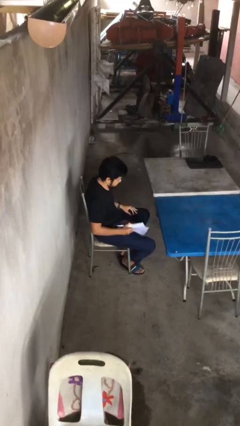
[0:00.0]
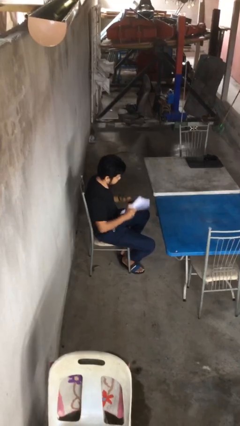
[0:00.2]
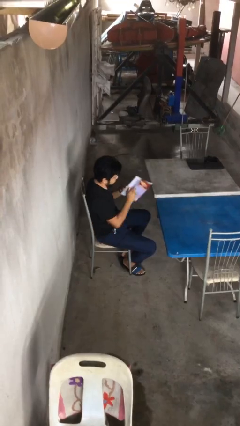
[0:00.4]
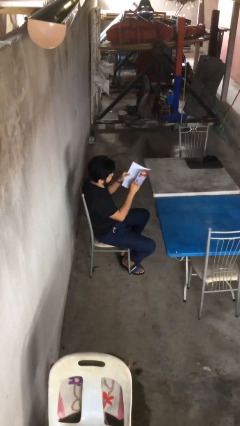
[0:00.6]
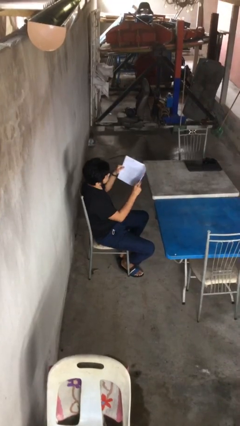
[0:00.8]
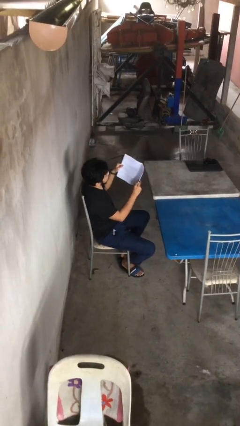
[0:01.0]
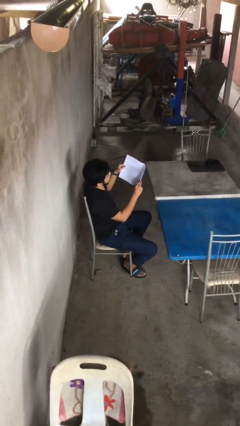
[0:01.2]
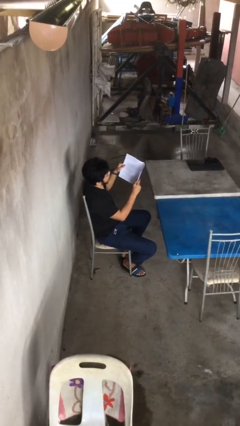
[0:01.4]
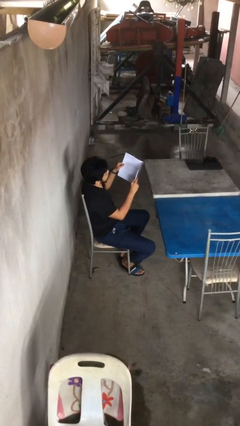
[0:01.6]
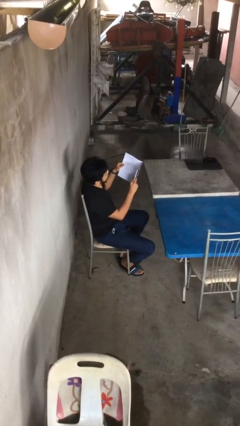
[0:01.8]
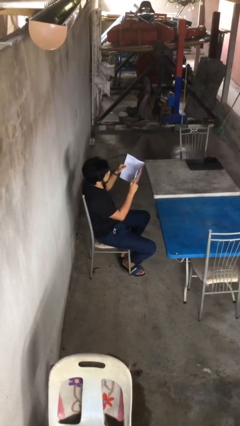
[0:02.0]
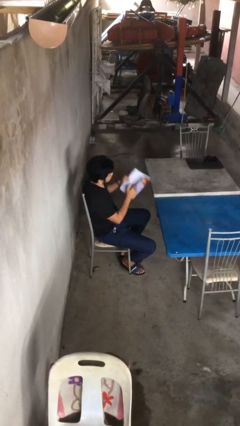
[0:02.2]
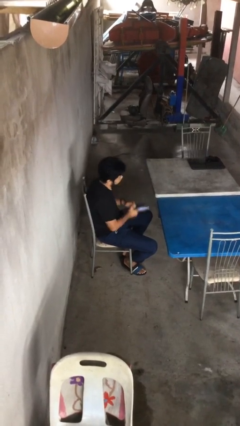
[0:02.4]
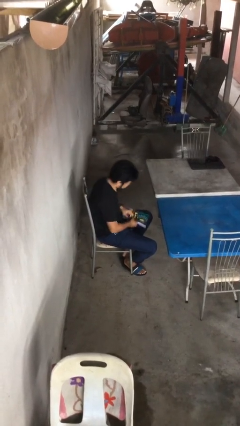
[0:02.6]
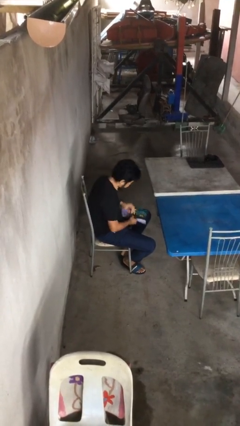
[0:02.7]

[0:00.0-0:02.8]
person reads magazine

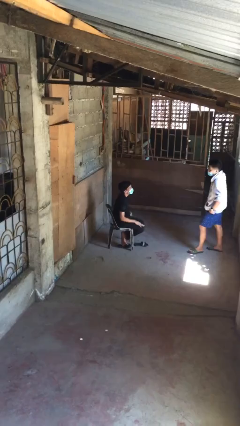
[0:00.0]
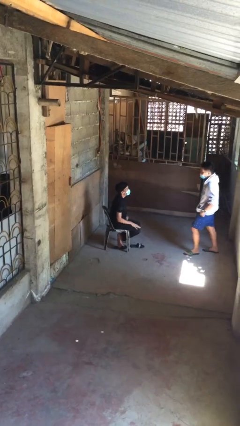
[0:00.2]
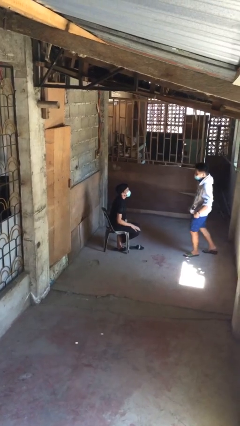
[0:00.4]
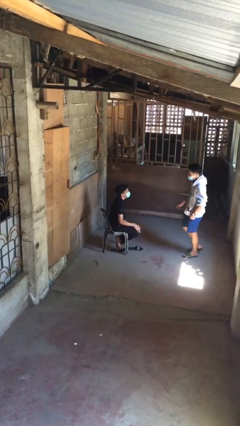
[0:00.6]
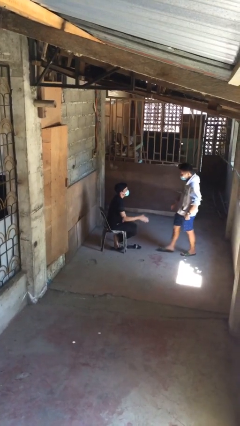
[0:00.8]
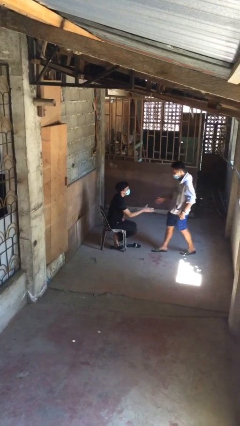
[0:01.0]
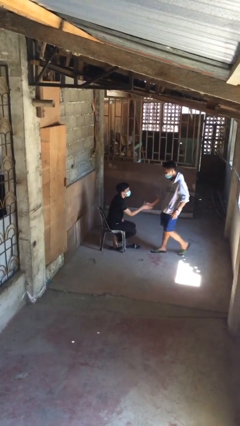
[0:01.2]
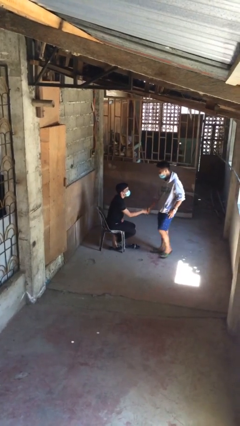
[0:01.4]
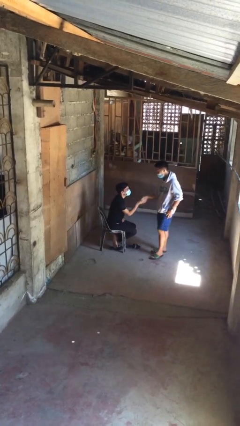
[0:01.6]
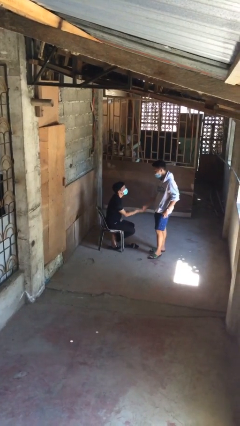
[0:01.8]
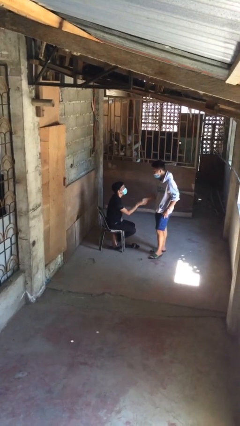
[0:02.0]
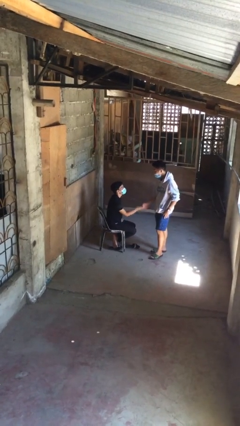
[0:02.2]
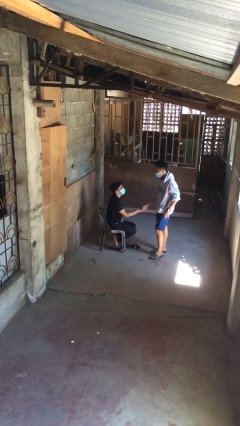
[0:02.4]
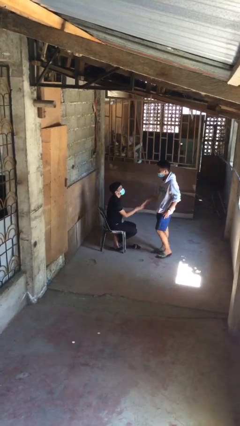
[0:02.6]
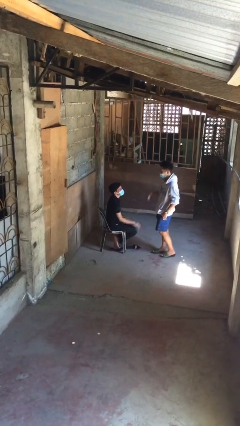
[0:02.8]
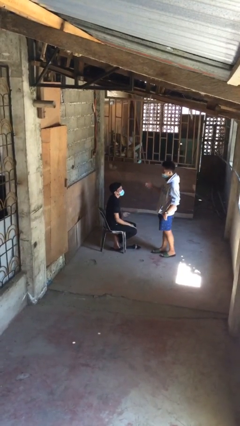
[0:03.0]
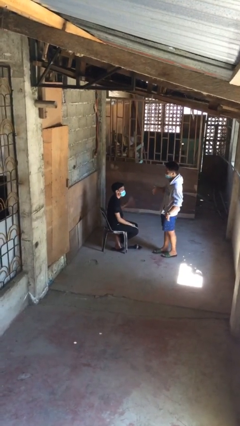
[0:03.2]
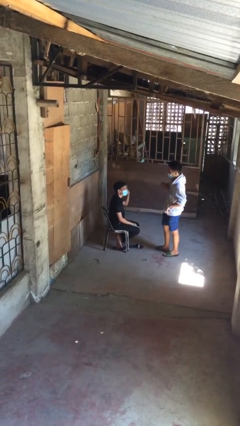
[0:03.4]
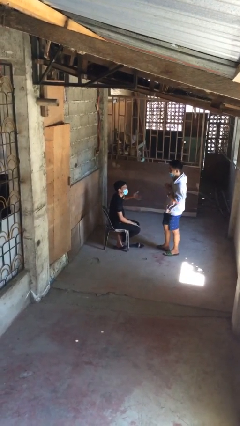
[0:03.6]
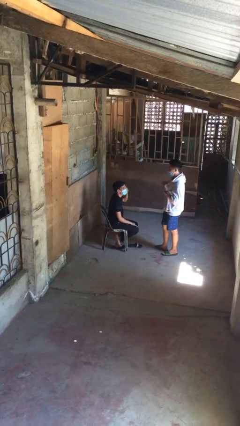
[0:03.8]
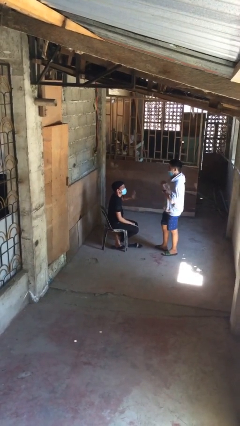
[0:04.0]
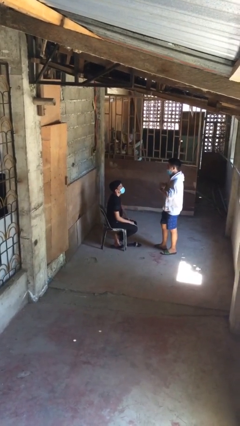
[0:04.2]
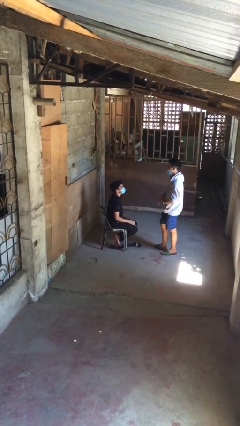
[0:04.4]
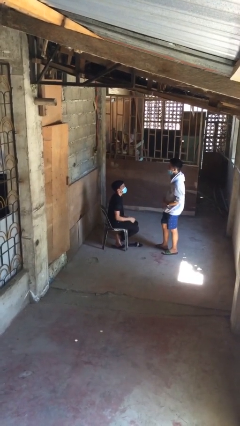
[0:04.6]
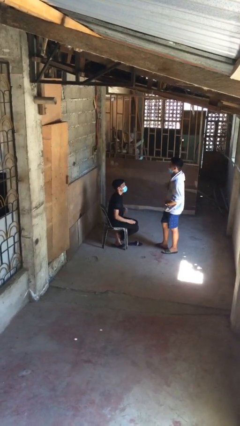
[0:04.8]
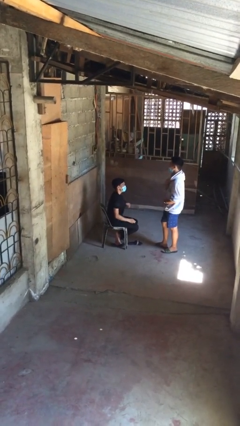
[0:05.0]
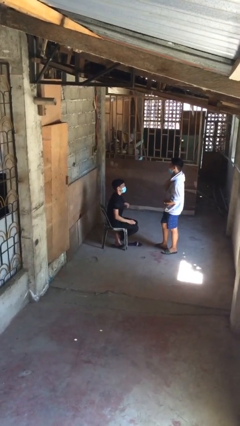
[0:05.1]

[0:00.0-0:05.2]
person shakes hand

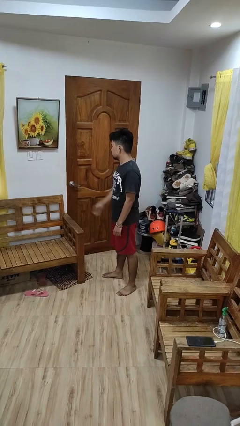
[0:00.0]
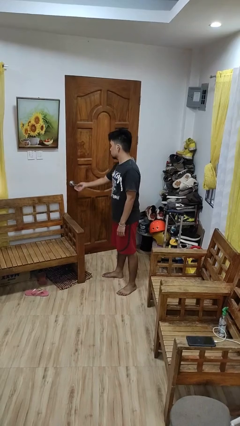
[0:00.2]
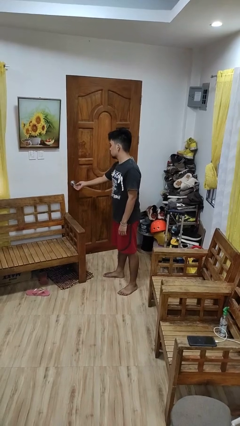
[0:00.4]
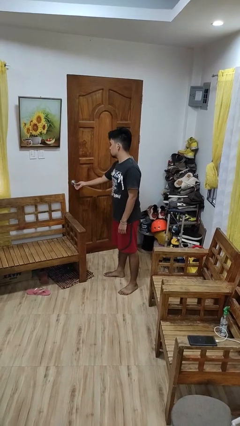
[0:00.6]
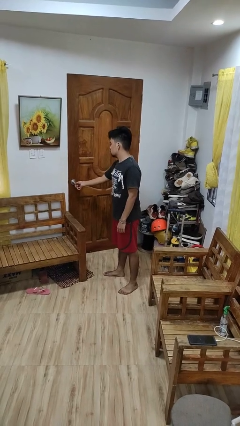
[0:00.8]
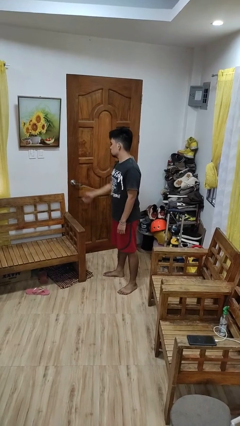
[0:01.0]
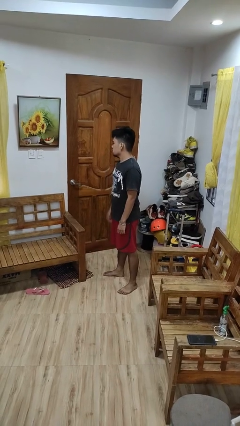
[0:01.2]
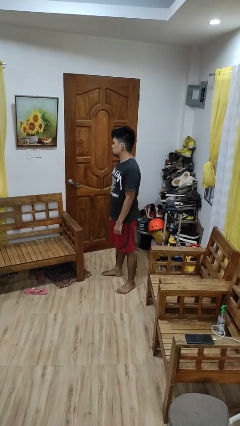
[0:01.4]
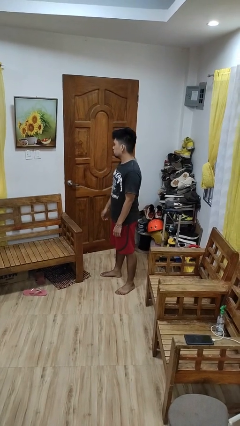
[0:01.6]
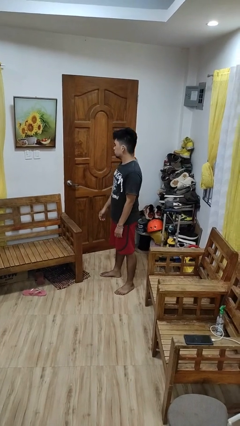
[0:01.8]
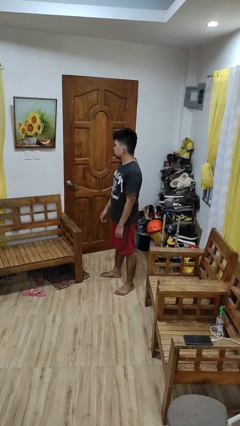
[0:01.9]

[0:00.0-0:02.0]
person locks door with keys

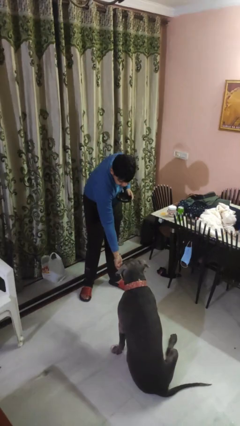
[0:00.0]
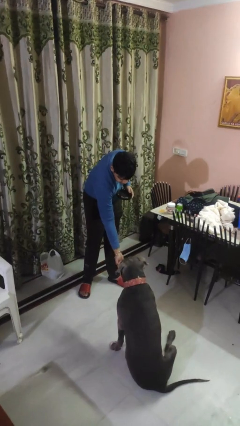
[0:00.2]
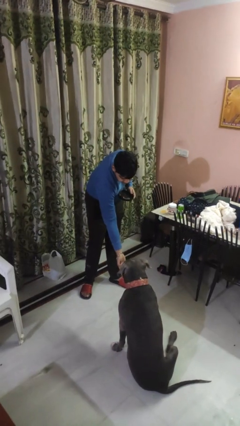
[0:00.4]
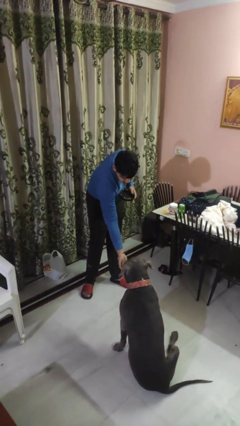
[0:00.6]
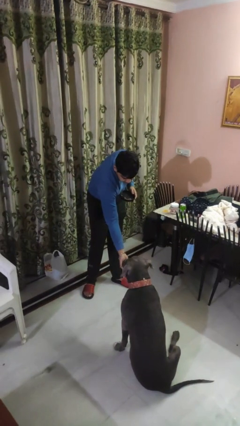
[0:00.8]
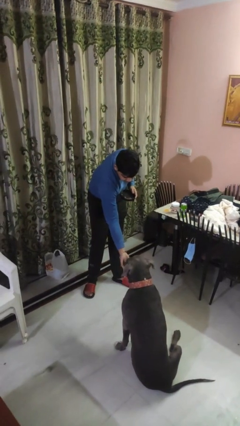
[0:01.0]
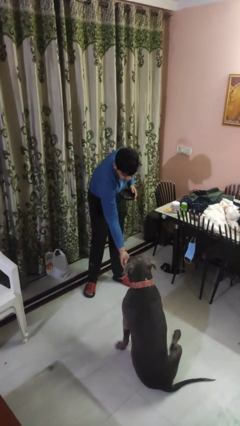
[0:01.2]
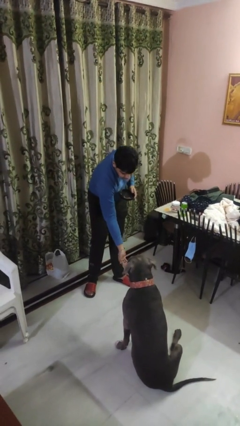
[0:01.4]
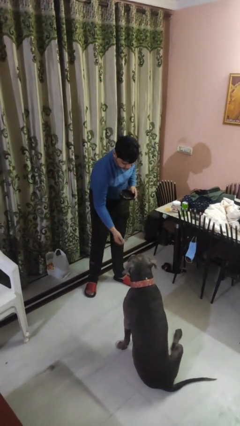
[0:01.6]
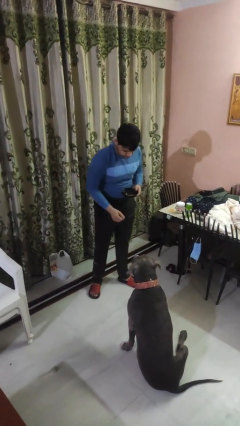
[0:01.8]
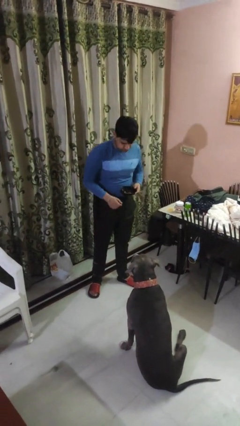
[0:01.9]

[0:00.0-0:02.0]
person feeds dog

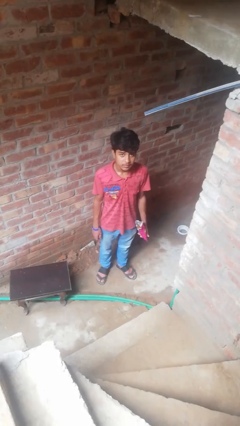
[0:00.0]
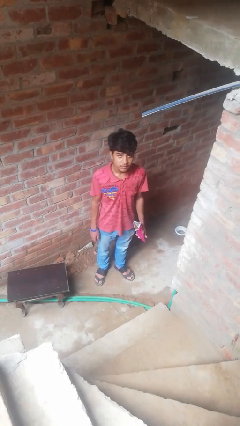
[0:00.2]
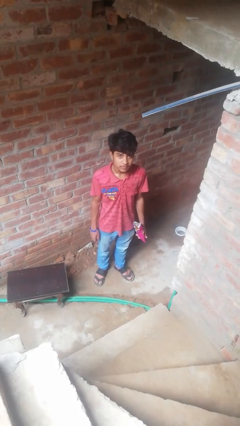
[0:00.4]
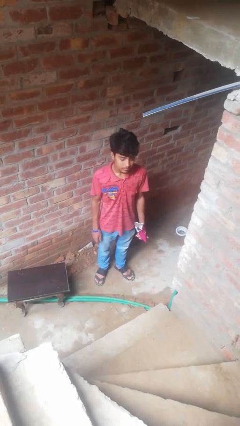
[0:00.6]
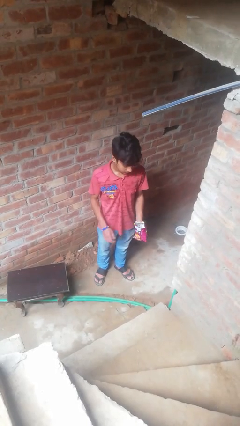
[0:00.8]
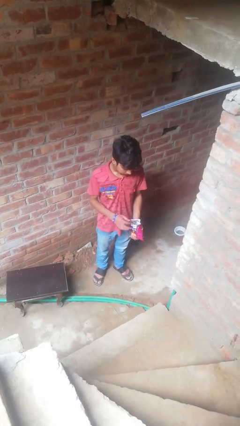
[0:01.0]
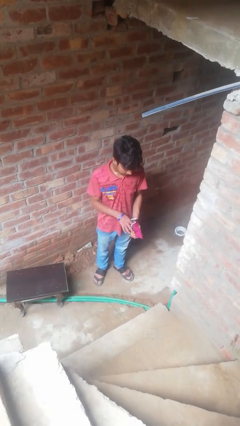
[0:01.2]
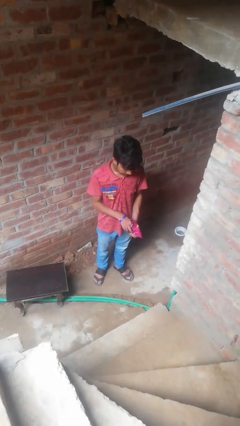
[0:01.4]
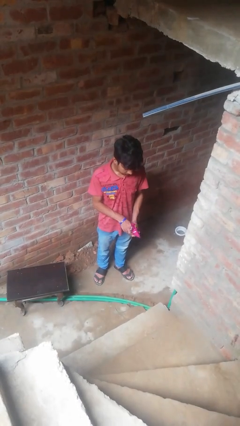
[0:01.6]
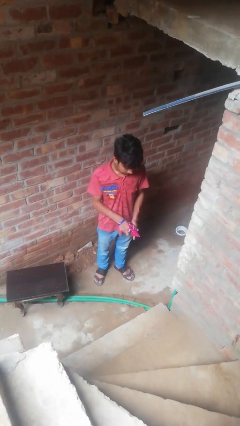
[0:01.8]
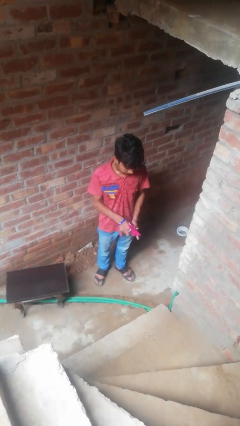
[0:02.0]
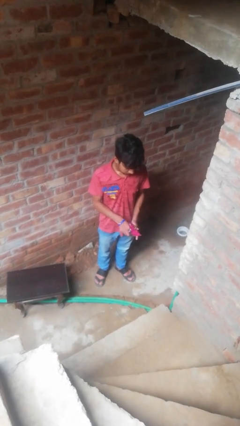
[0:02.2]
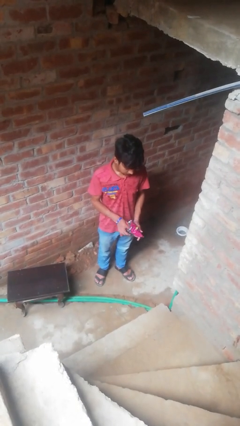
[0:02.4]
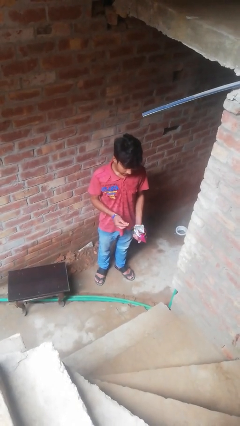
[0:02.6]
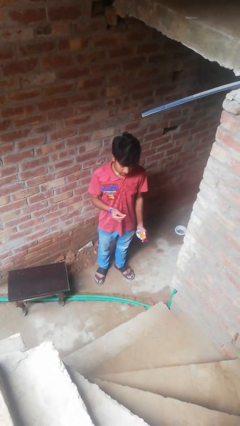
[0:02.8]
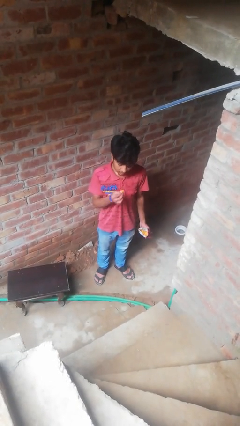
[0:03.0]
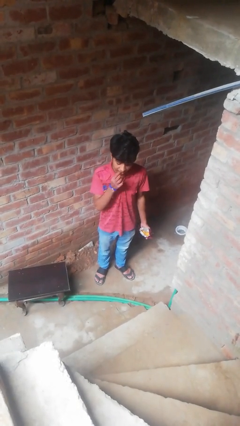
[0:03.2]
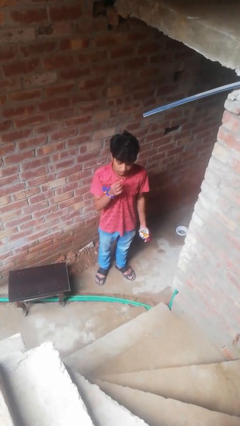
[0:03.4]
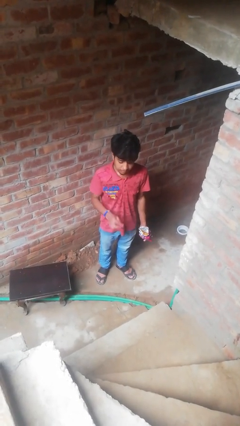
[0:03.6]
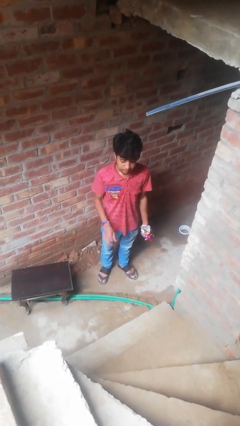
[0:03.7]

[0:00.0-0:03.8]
person eats snack from bag

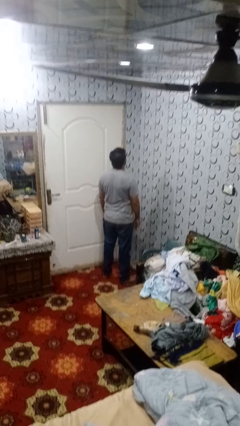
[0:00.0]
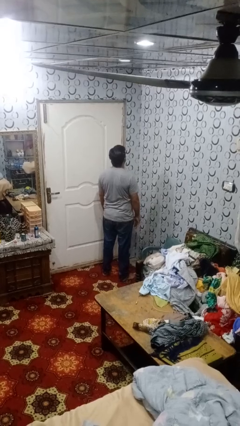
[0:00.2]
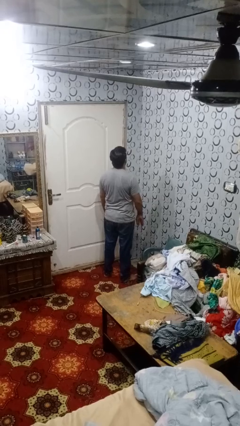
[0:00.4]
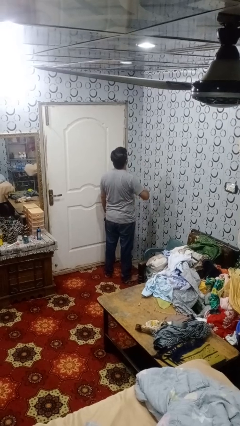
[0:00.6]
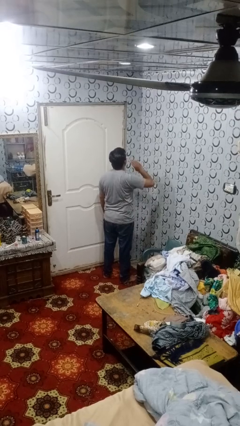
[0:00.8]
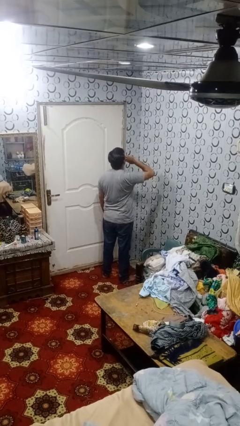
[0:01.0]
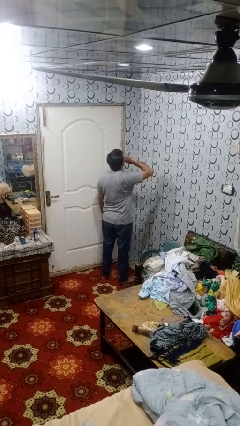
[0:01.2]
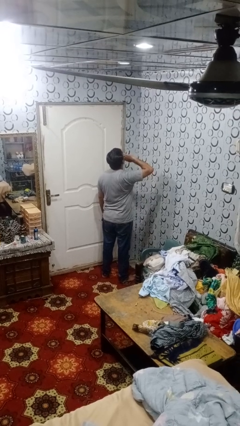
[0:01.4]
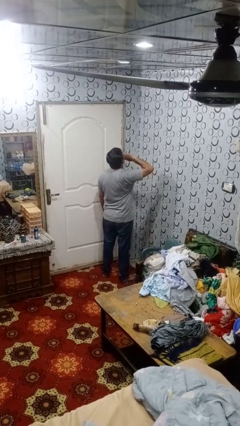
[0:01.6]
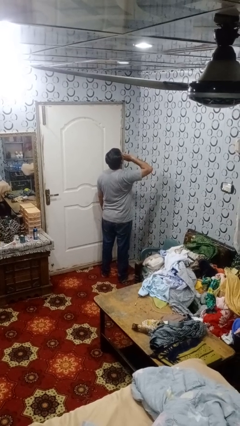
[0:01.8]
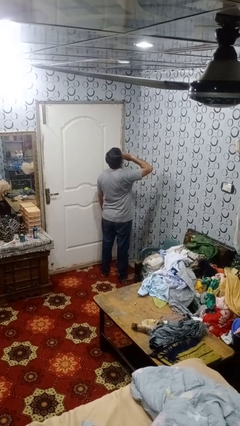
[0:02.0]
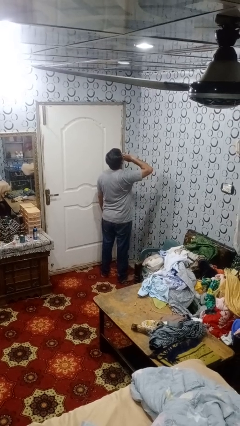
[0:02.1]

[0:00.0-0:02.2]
person yawns
